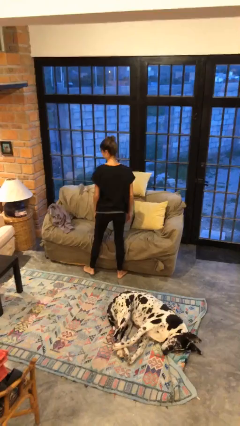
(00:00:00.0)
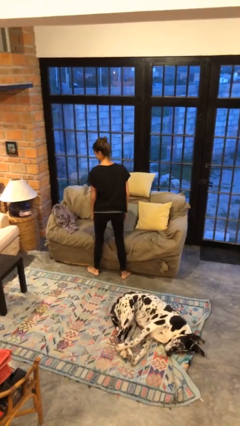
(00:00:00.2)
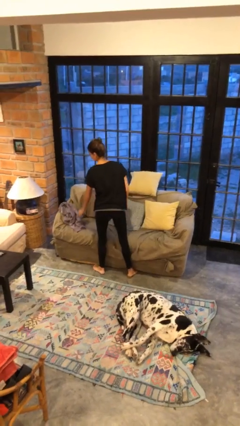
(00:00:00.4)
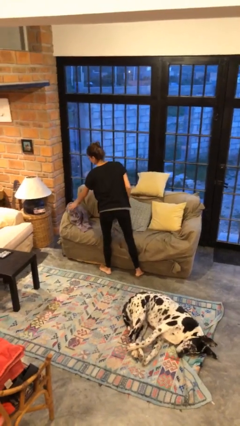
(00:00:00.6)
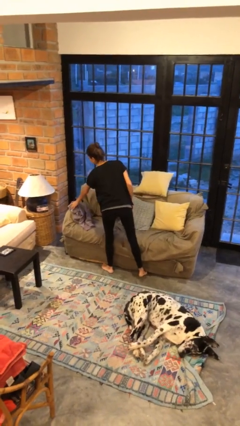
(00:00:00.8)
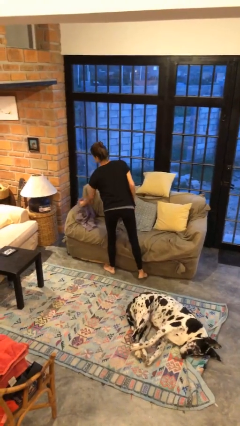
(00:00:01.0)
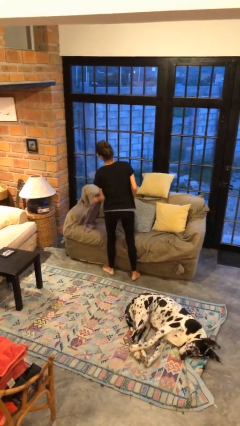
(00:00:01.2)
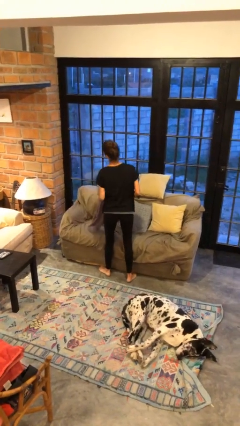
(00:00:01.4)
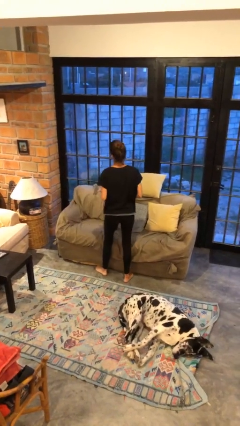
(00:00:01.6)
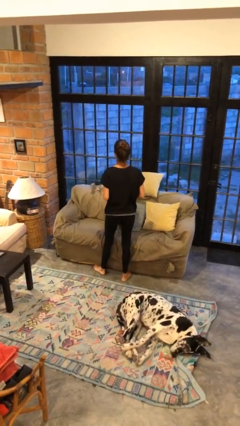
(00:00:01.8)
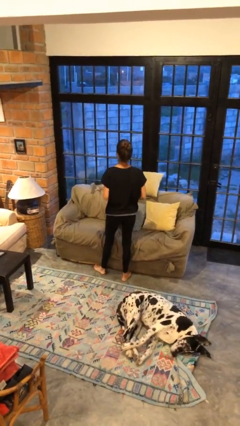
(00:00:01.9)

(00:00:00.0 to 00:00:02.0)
person picks up object from couch

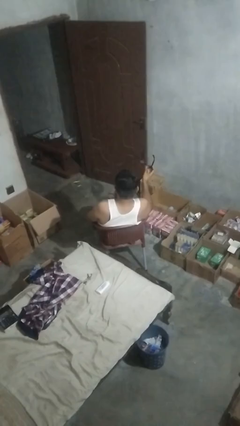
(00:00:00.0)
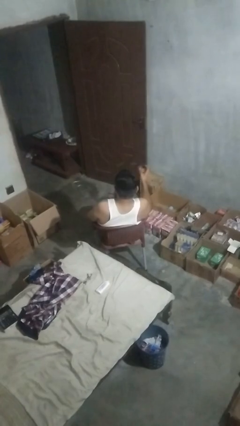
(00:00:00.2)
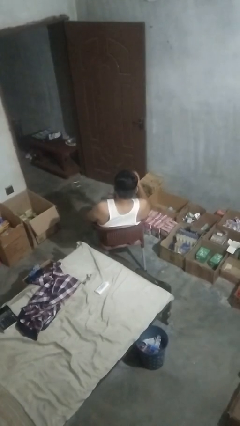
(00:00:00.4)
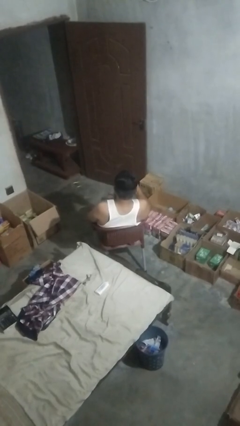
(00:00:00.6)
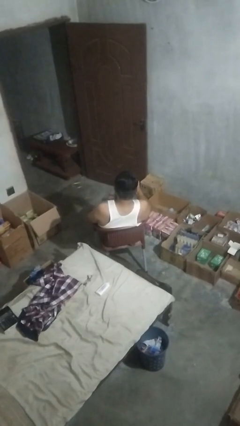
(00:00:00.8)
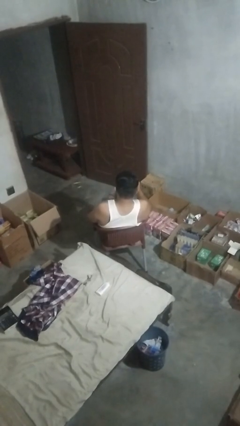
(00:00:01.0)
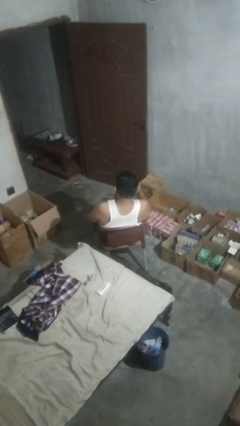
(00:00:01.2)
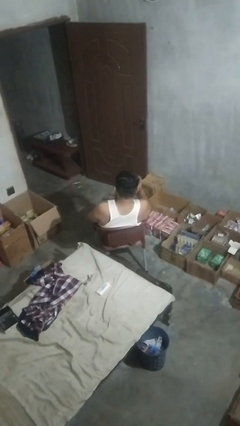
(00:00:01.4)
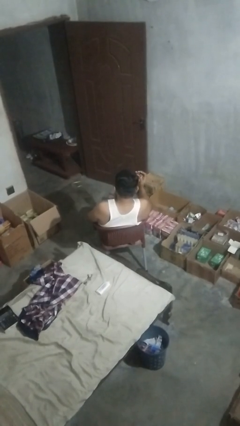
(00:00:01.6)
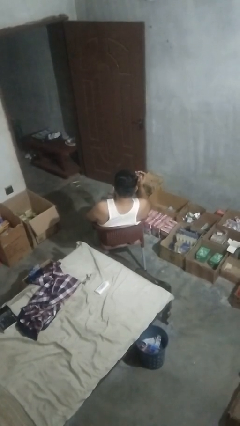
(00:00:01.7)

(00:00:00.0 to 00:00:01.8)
person puts on sunglasses

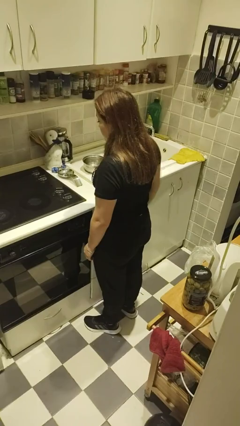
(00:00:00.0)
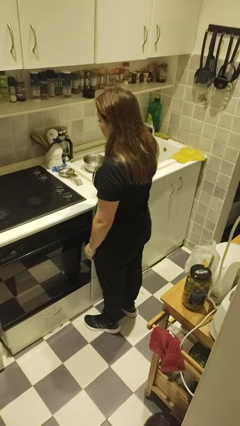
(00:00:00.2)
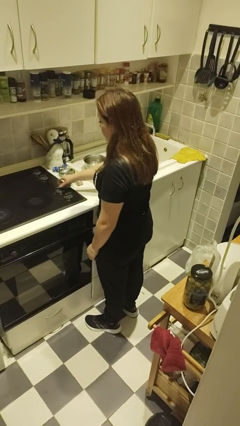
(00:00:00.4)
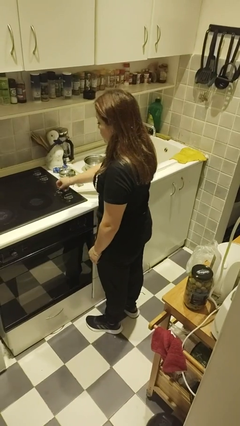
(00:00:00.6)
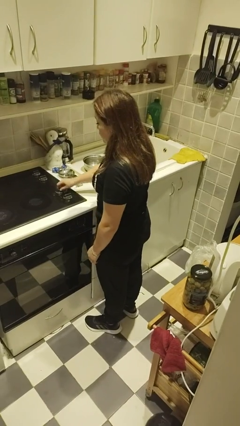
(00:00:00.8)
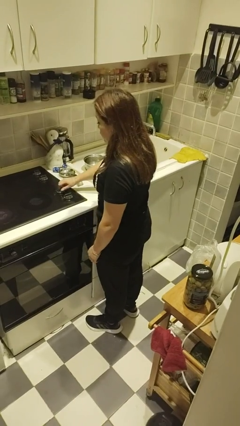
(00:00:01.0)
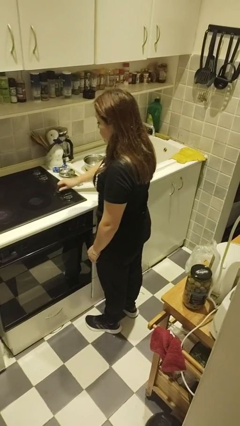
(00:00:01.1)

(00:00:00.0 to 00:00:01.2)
person turns off stovetop

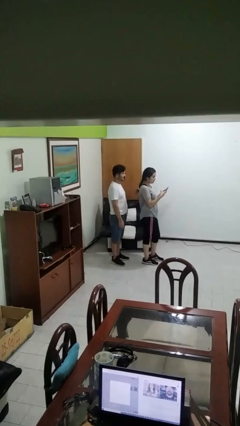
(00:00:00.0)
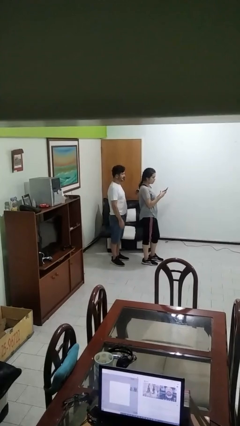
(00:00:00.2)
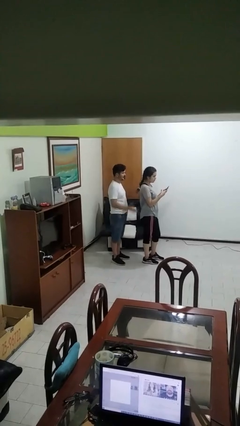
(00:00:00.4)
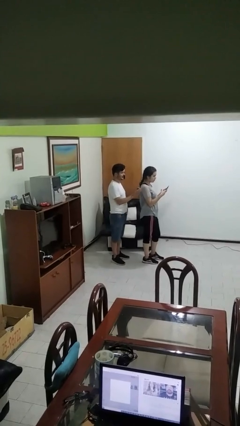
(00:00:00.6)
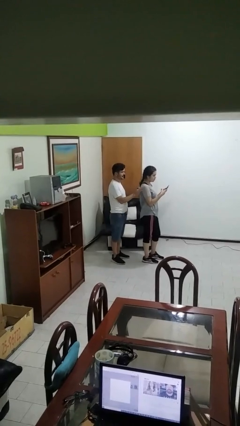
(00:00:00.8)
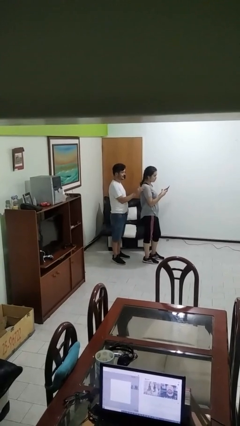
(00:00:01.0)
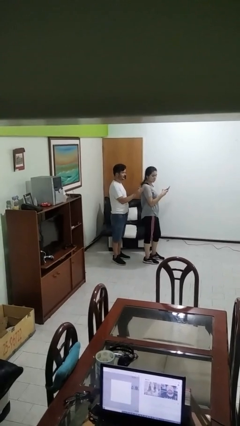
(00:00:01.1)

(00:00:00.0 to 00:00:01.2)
person touches back of person

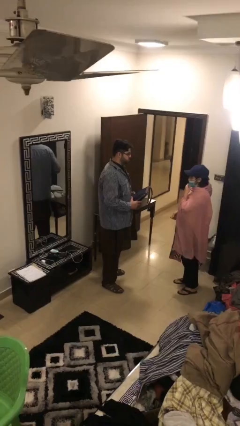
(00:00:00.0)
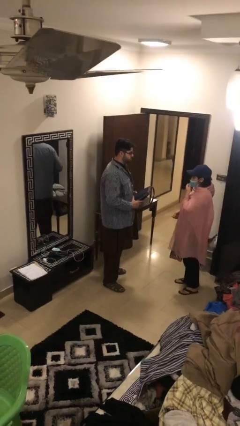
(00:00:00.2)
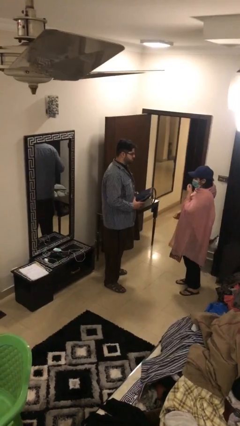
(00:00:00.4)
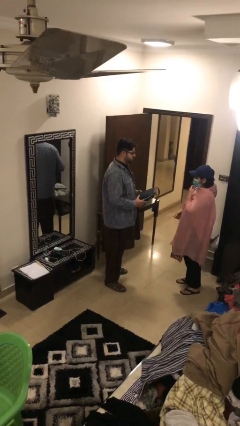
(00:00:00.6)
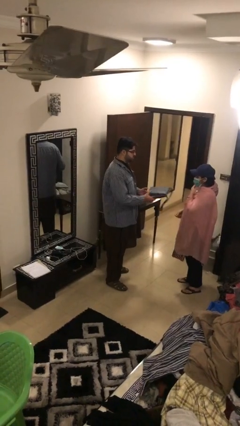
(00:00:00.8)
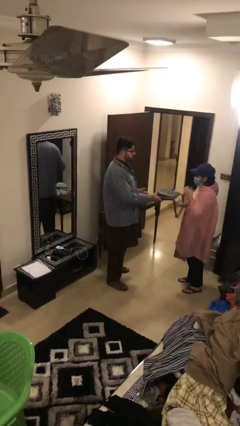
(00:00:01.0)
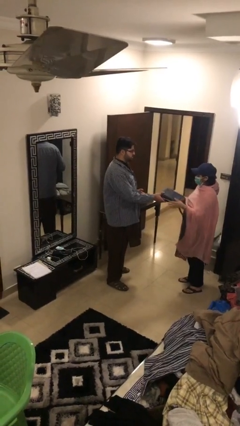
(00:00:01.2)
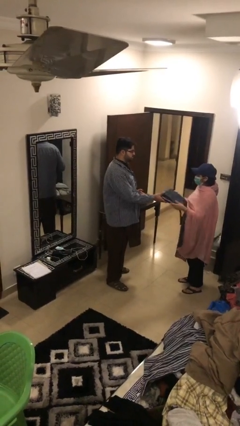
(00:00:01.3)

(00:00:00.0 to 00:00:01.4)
person transfers object to person

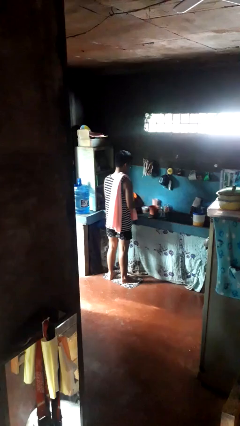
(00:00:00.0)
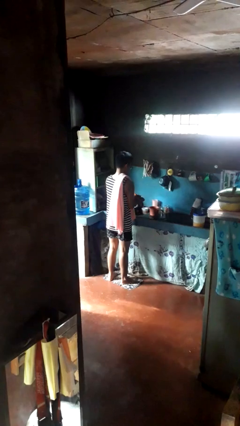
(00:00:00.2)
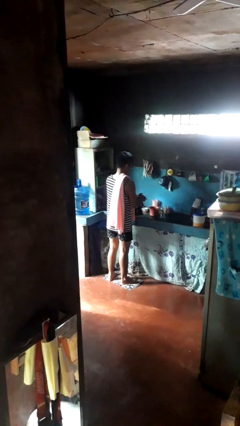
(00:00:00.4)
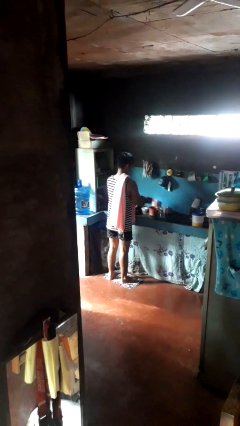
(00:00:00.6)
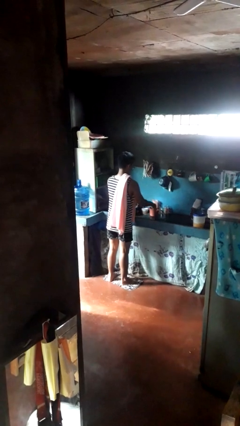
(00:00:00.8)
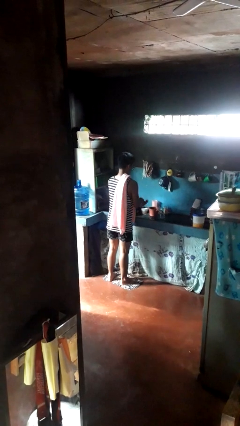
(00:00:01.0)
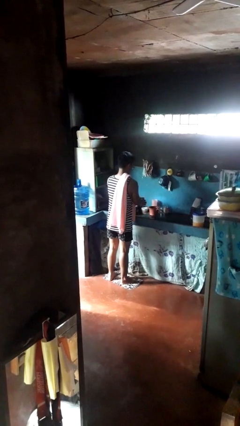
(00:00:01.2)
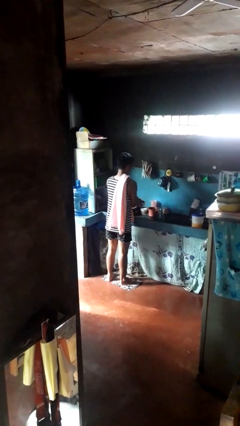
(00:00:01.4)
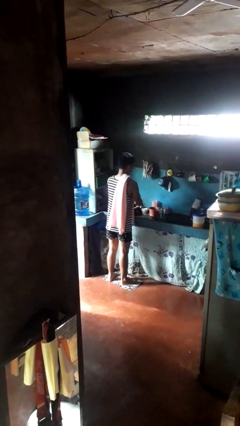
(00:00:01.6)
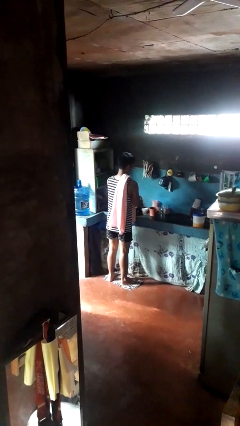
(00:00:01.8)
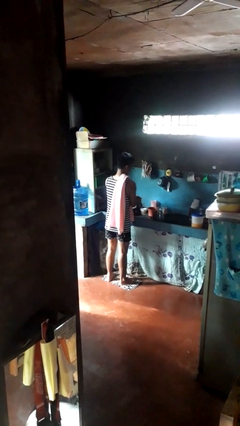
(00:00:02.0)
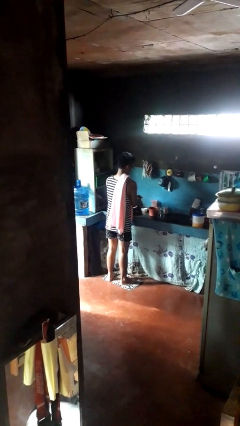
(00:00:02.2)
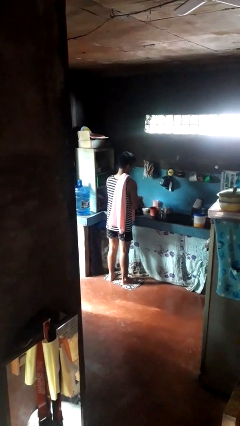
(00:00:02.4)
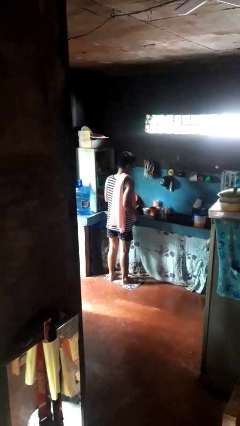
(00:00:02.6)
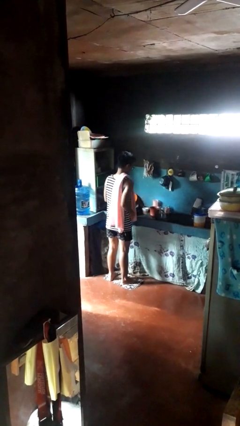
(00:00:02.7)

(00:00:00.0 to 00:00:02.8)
person washes hands

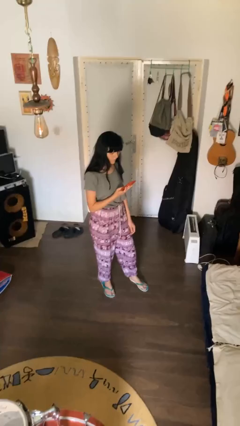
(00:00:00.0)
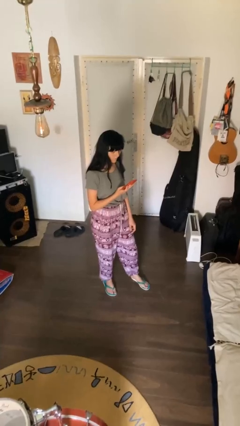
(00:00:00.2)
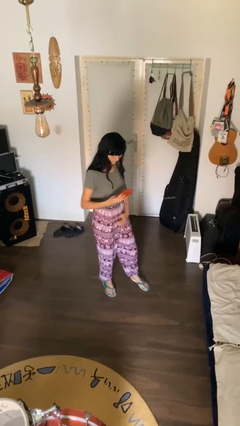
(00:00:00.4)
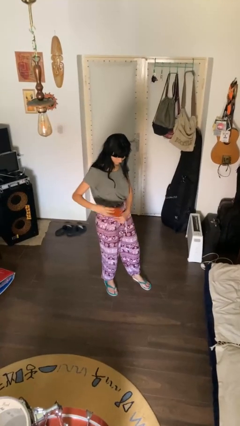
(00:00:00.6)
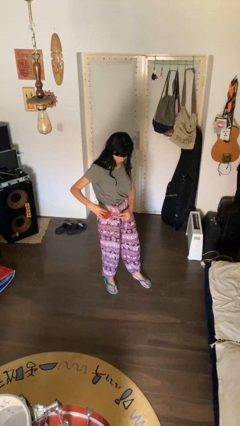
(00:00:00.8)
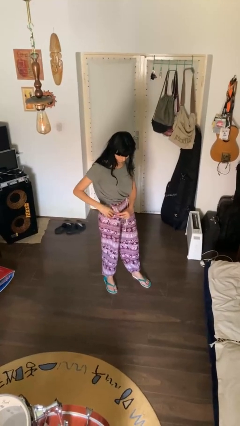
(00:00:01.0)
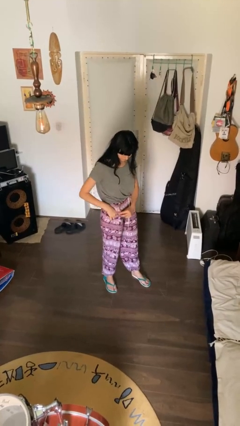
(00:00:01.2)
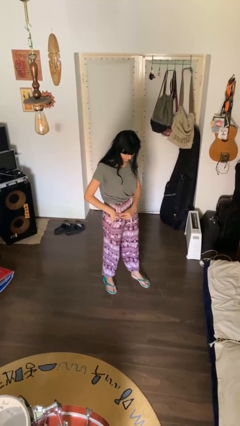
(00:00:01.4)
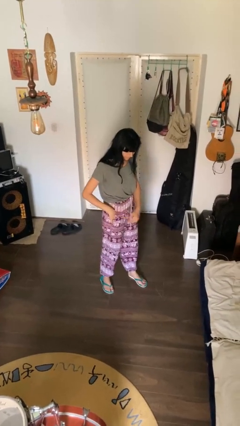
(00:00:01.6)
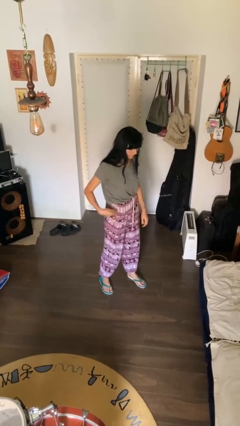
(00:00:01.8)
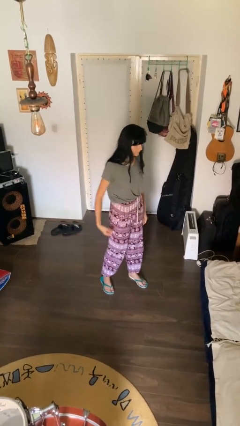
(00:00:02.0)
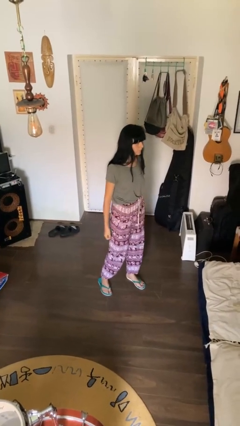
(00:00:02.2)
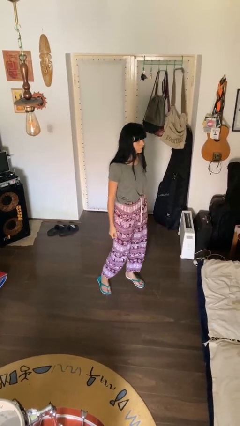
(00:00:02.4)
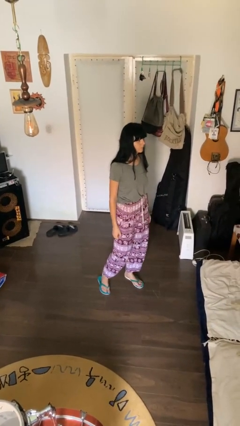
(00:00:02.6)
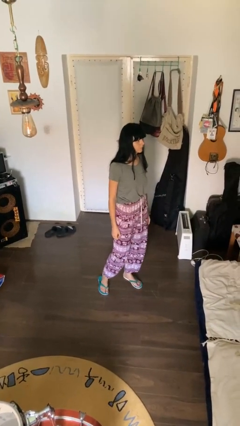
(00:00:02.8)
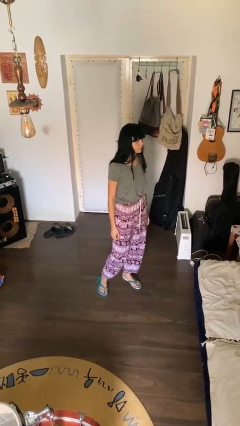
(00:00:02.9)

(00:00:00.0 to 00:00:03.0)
person puts phone into pocket

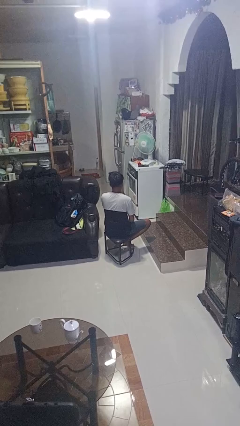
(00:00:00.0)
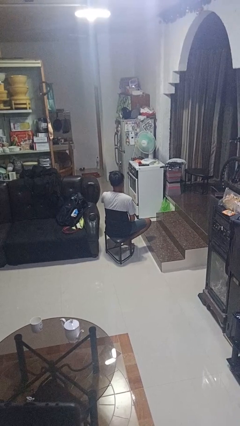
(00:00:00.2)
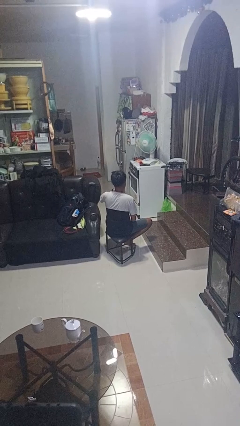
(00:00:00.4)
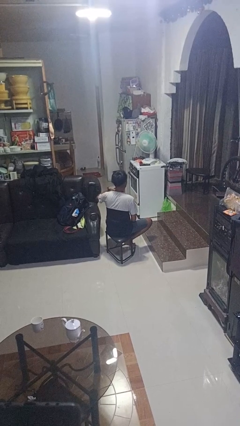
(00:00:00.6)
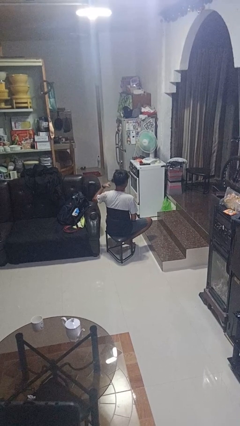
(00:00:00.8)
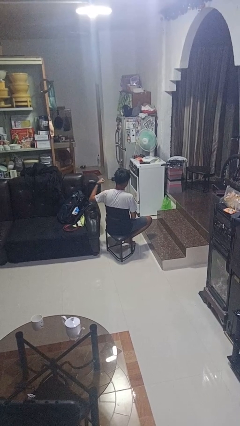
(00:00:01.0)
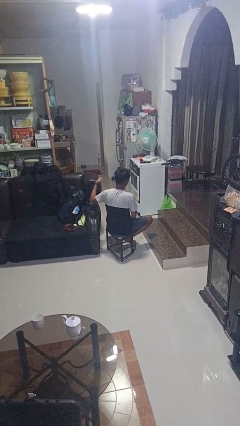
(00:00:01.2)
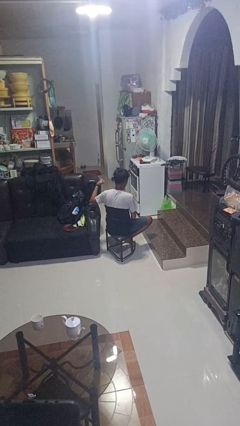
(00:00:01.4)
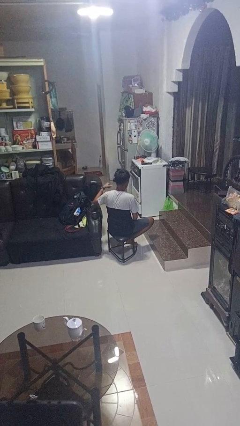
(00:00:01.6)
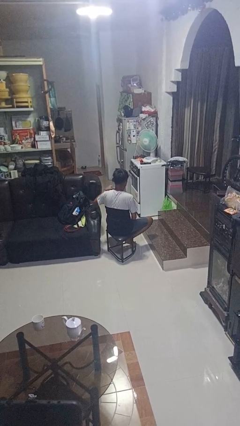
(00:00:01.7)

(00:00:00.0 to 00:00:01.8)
person gestures cut

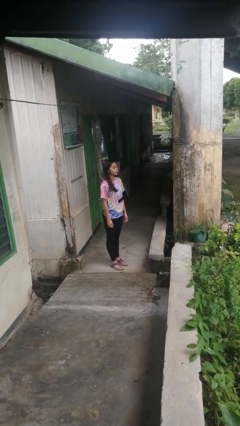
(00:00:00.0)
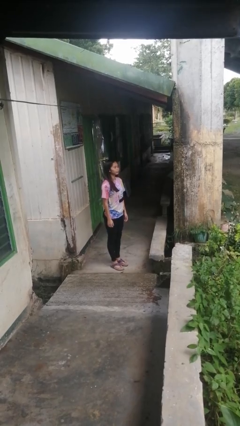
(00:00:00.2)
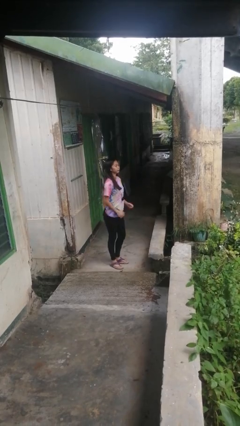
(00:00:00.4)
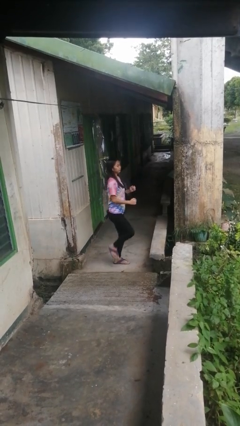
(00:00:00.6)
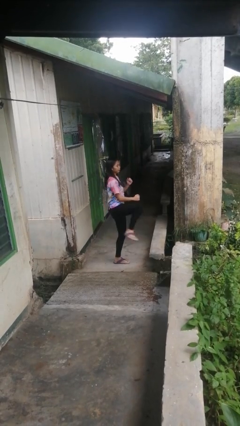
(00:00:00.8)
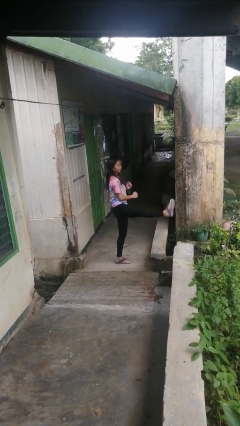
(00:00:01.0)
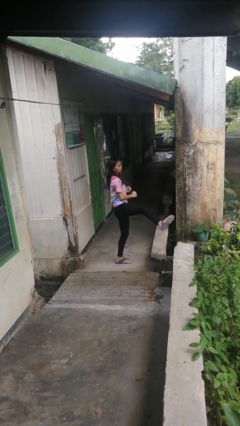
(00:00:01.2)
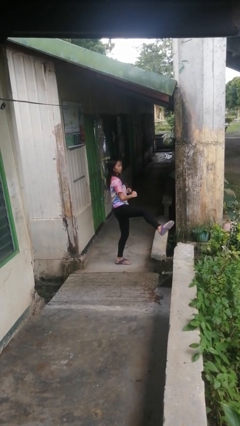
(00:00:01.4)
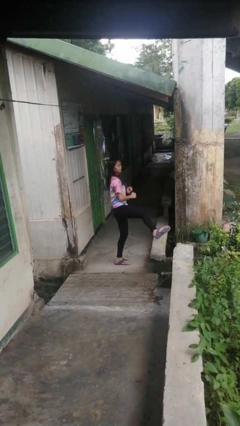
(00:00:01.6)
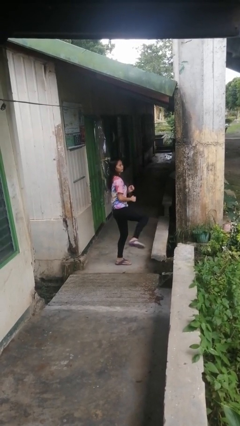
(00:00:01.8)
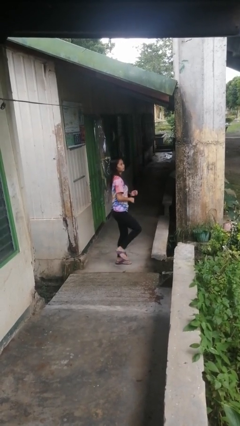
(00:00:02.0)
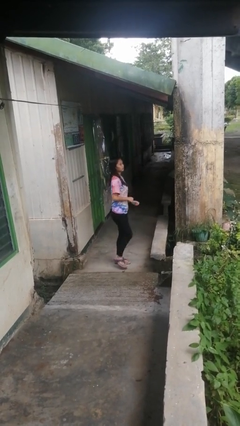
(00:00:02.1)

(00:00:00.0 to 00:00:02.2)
person karate kicks
